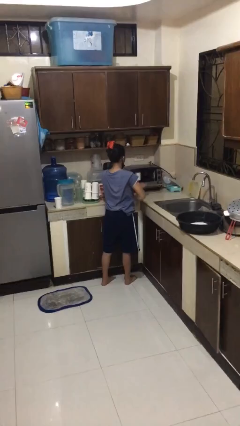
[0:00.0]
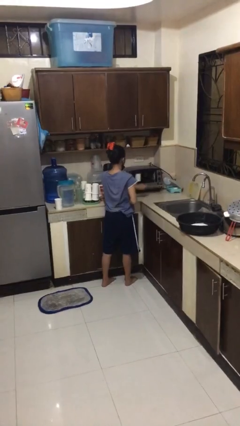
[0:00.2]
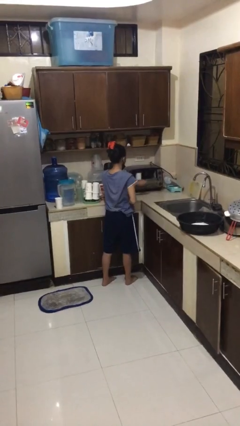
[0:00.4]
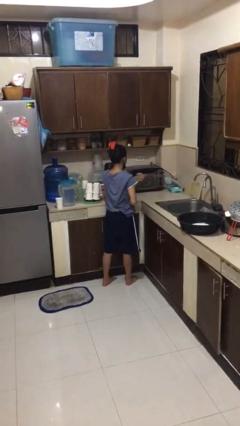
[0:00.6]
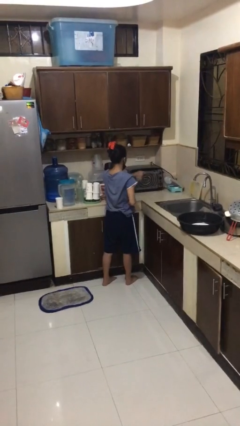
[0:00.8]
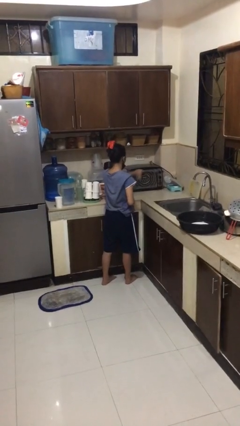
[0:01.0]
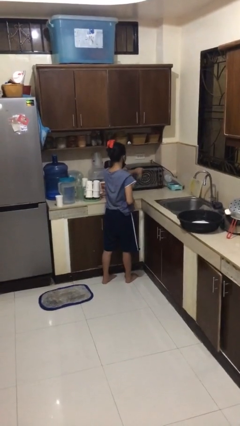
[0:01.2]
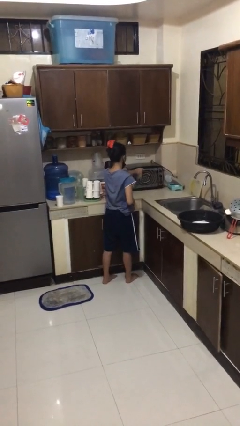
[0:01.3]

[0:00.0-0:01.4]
person closes microwave

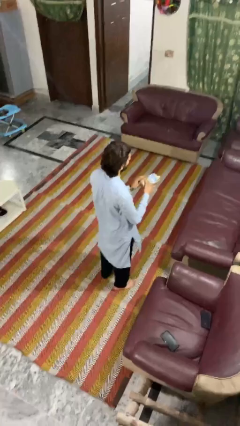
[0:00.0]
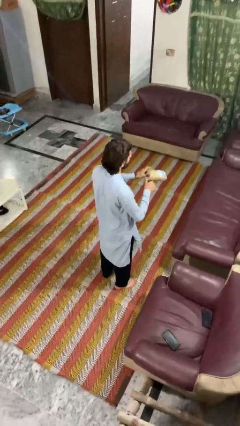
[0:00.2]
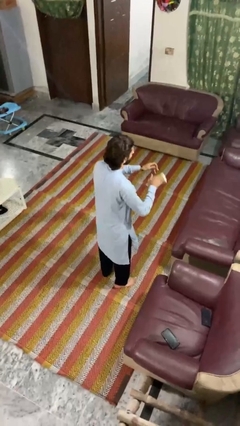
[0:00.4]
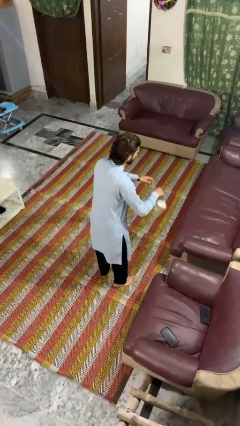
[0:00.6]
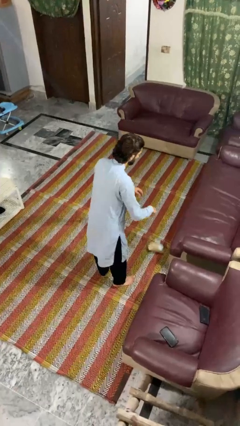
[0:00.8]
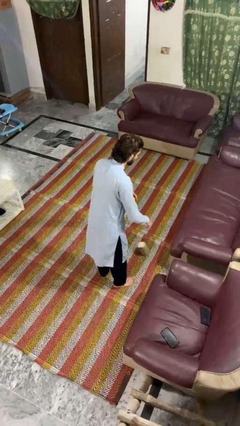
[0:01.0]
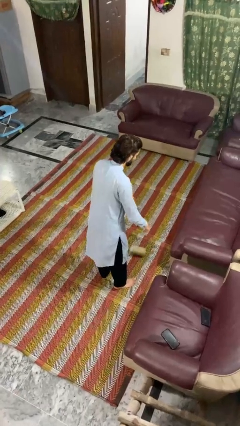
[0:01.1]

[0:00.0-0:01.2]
person drops object

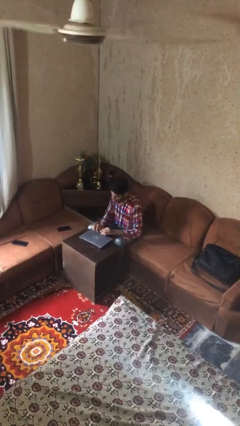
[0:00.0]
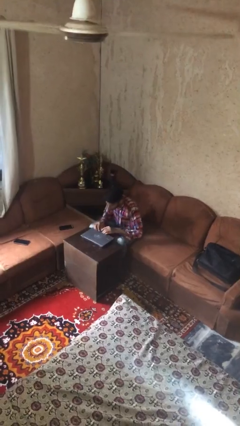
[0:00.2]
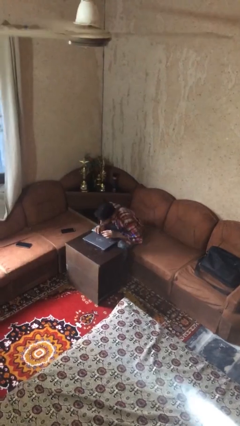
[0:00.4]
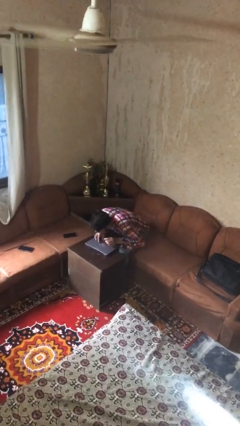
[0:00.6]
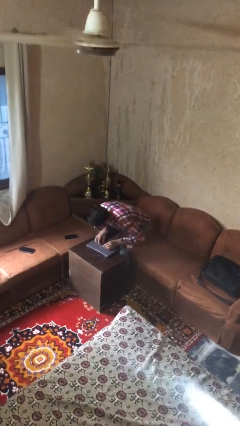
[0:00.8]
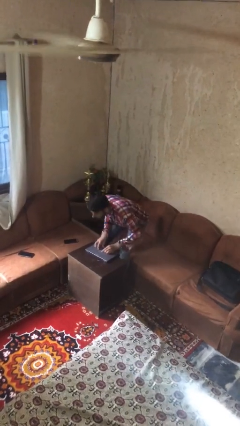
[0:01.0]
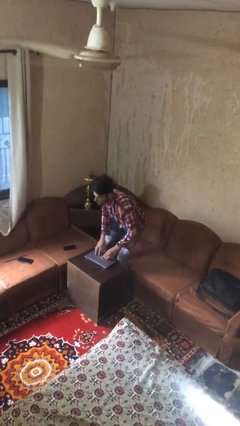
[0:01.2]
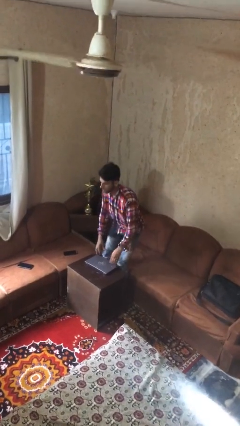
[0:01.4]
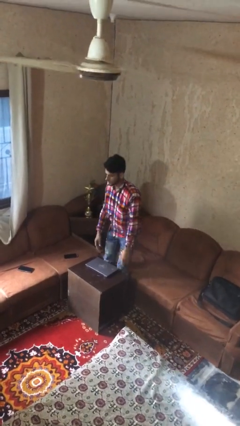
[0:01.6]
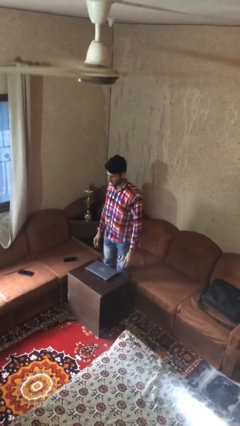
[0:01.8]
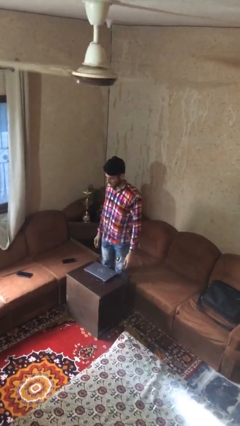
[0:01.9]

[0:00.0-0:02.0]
person stands up

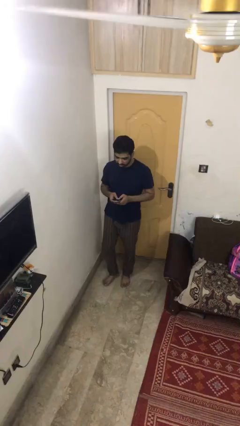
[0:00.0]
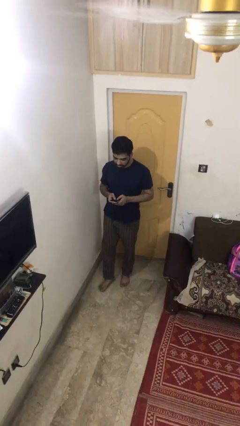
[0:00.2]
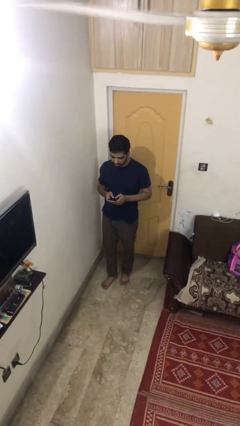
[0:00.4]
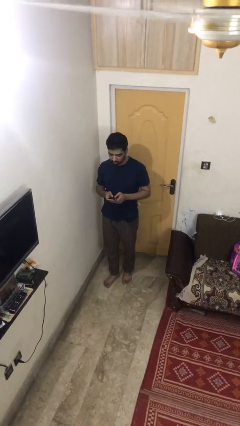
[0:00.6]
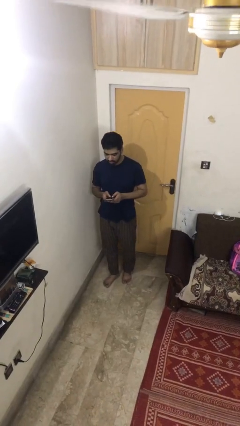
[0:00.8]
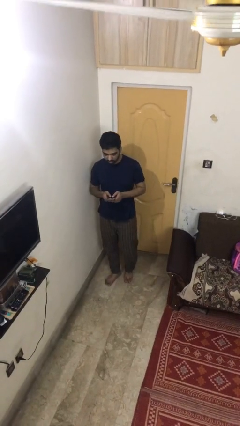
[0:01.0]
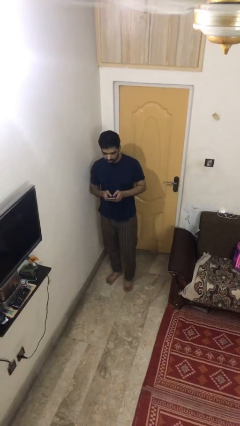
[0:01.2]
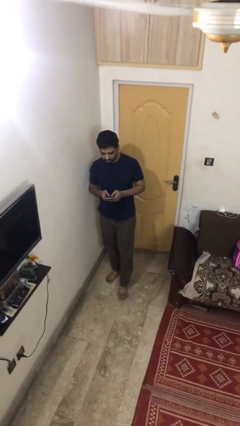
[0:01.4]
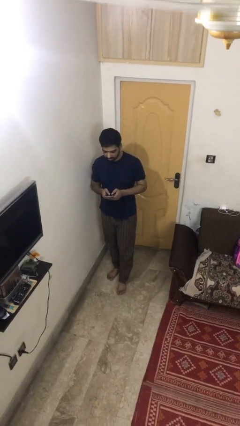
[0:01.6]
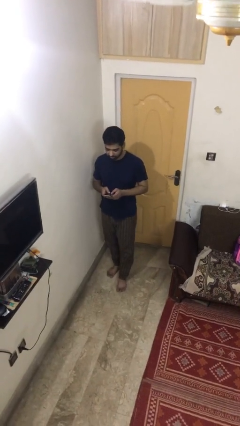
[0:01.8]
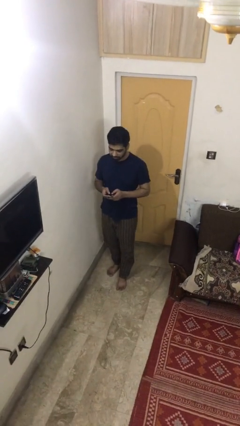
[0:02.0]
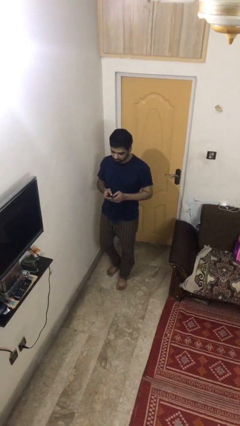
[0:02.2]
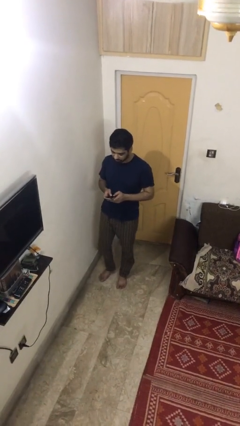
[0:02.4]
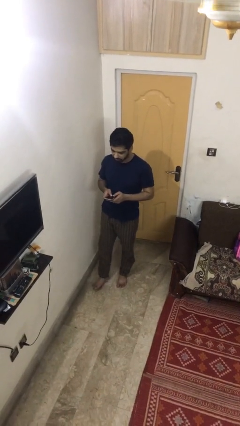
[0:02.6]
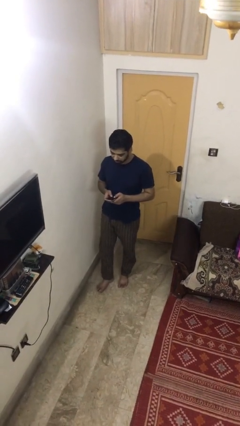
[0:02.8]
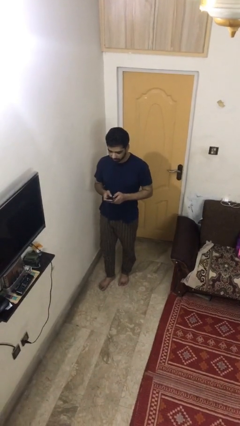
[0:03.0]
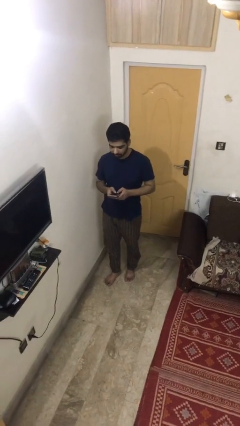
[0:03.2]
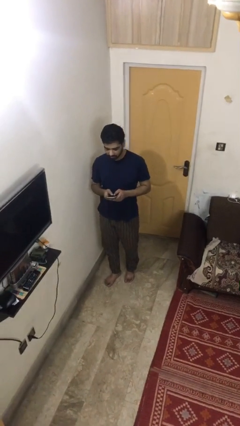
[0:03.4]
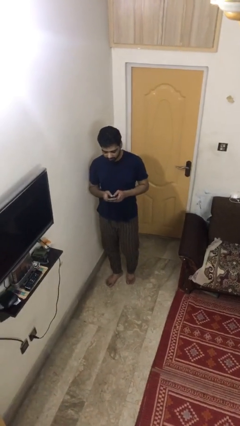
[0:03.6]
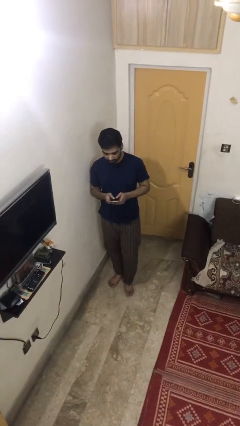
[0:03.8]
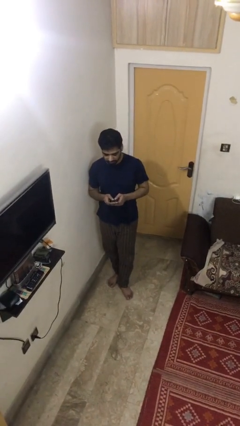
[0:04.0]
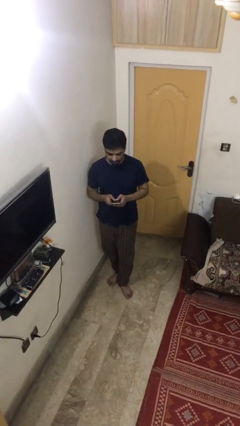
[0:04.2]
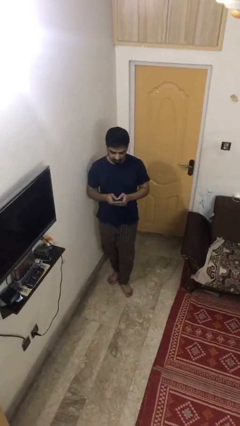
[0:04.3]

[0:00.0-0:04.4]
person texts on phone

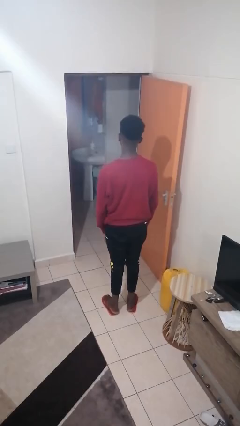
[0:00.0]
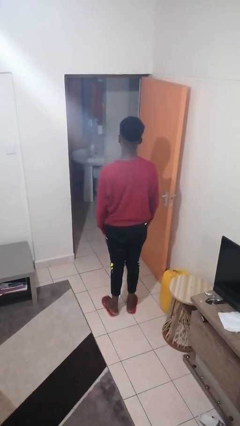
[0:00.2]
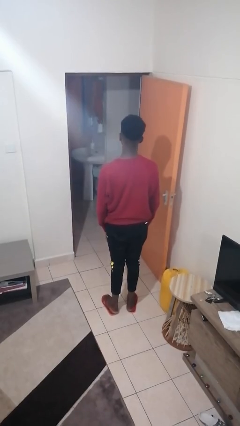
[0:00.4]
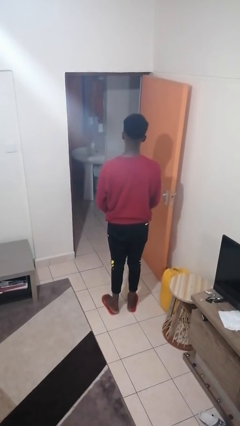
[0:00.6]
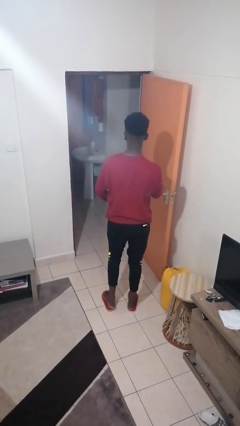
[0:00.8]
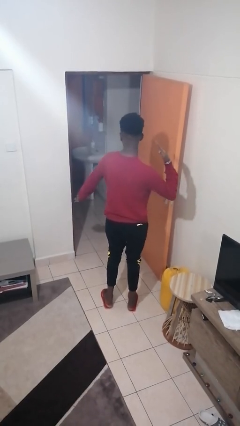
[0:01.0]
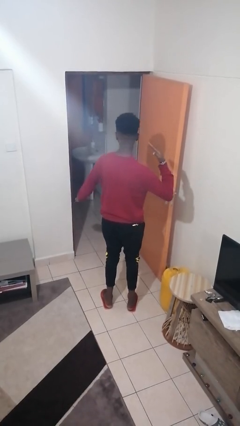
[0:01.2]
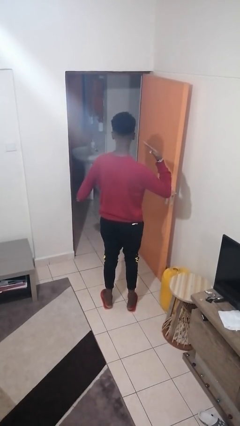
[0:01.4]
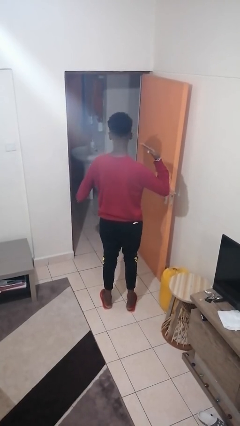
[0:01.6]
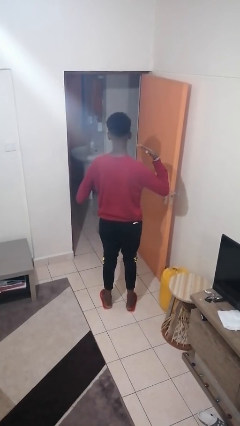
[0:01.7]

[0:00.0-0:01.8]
person karate chop

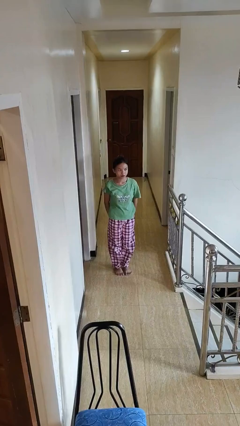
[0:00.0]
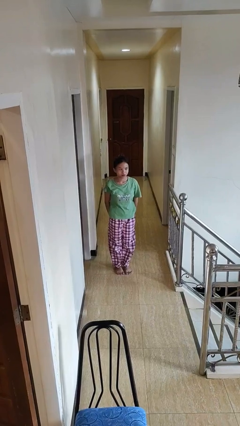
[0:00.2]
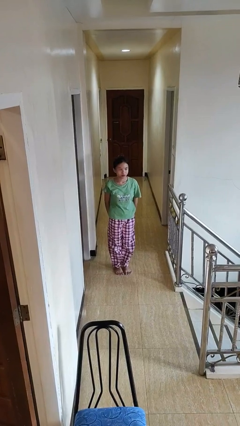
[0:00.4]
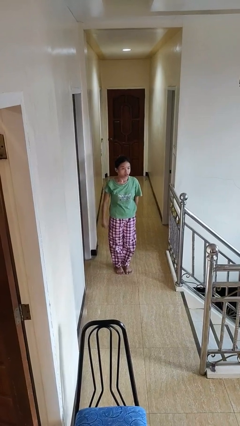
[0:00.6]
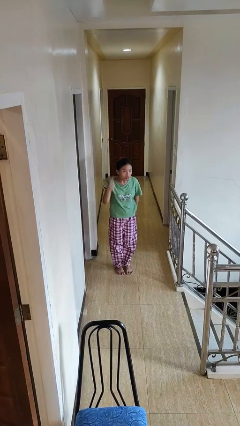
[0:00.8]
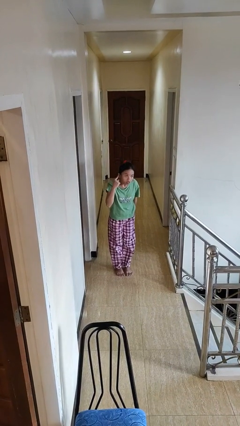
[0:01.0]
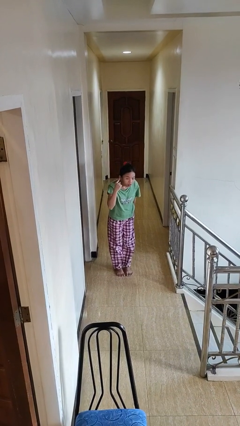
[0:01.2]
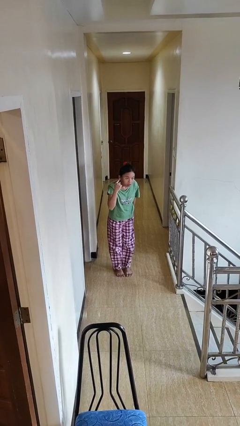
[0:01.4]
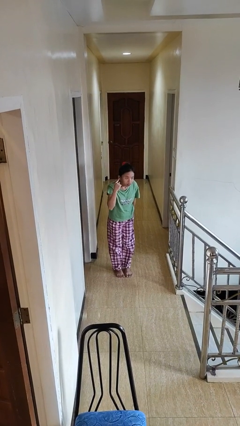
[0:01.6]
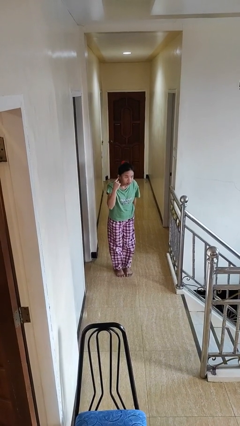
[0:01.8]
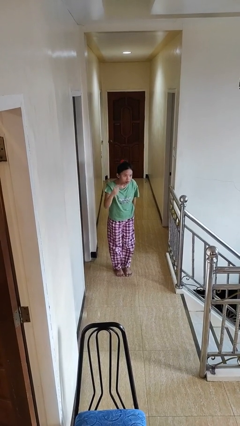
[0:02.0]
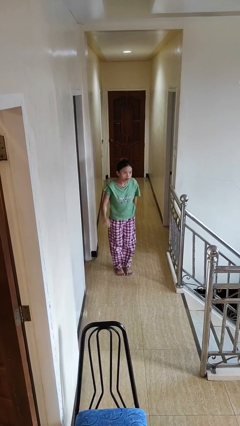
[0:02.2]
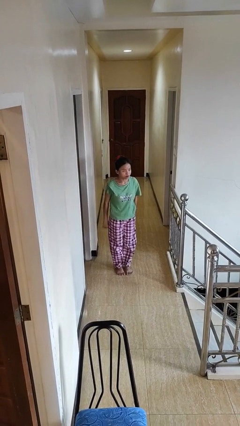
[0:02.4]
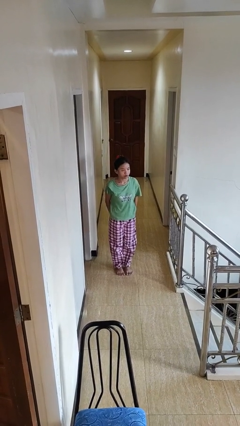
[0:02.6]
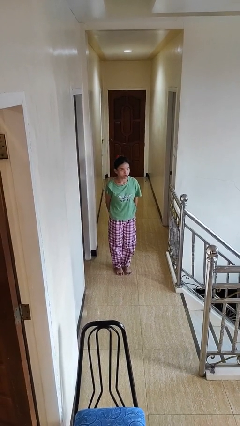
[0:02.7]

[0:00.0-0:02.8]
person gestures listen closely

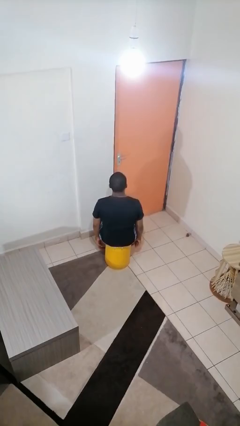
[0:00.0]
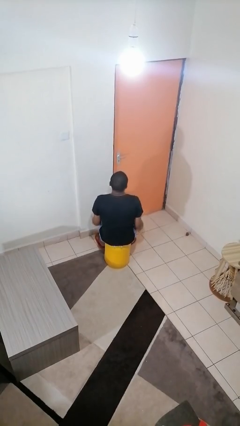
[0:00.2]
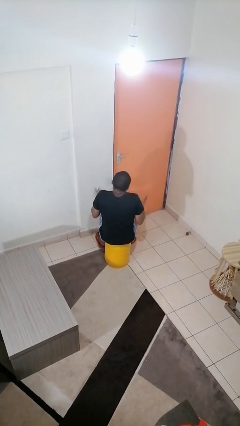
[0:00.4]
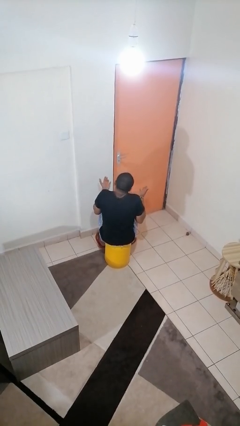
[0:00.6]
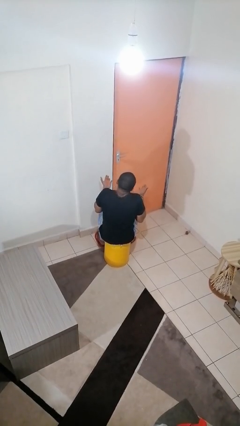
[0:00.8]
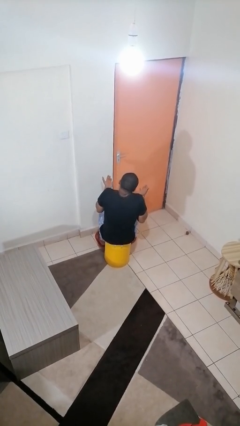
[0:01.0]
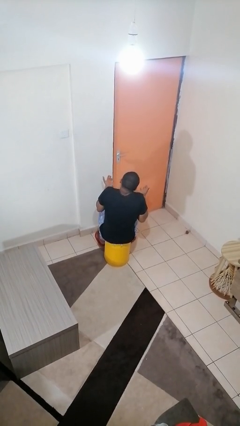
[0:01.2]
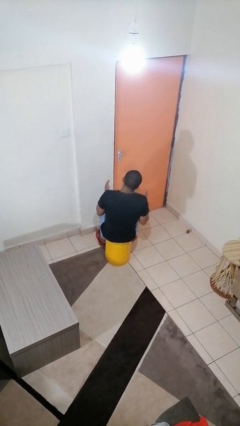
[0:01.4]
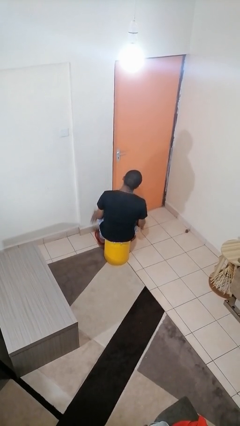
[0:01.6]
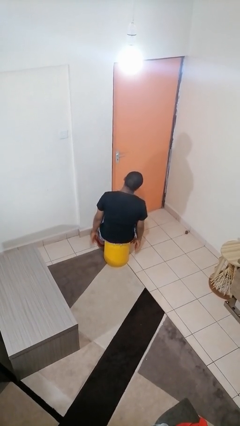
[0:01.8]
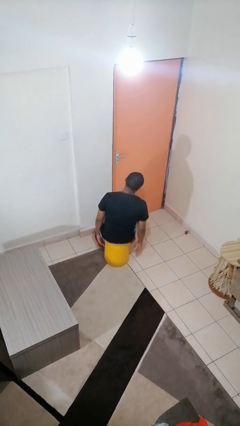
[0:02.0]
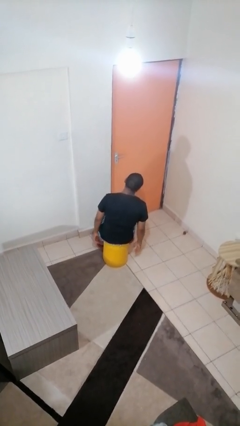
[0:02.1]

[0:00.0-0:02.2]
person shrugs

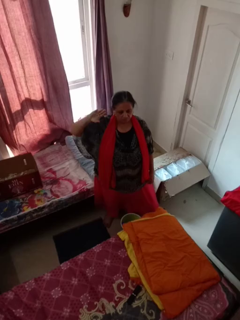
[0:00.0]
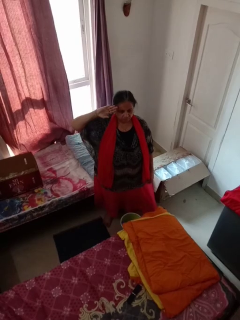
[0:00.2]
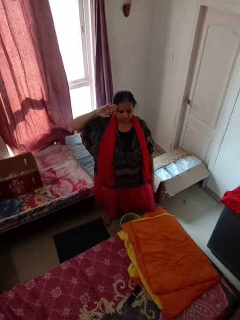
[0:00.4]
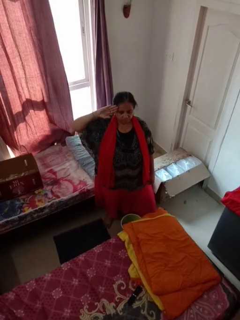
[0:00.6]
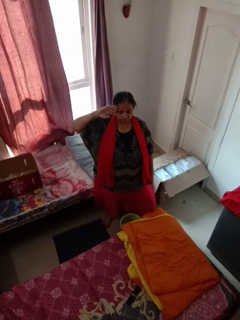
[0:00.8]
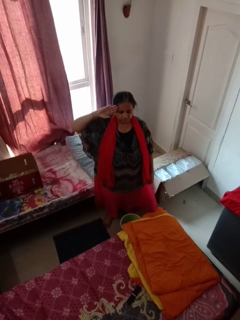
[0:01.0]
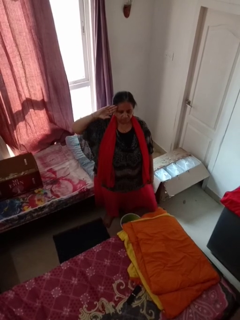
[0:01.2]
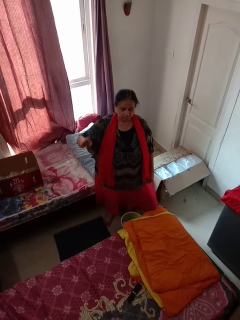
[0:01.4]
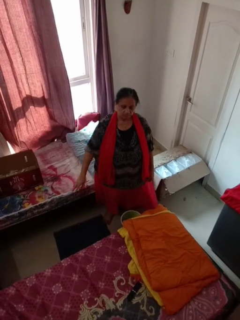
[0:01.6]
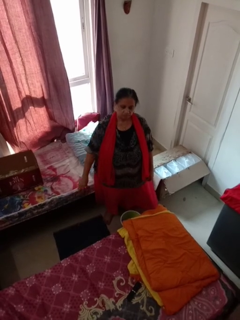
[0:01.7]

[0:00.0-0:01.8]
person salutes
